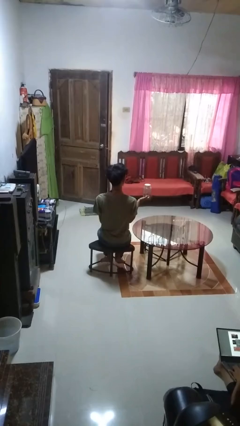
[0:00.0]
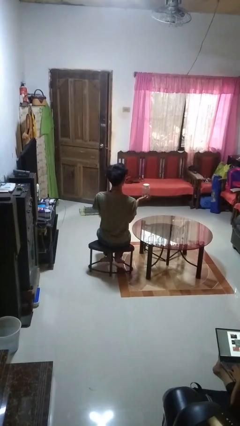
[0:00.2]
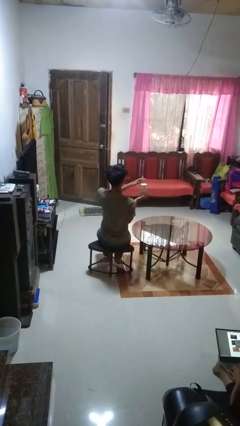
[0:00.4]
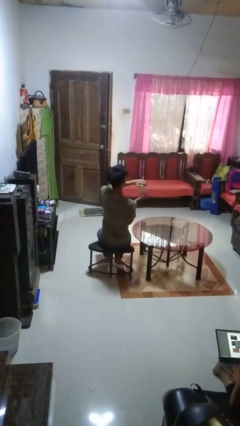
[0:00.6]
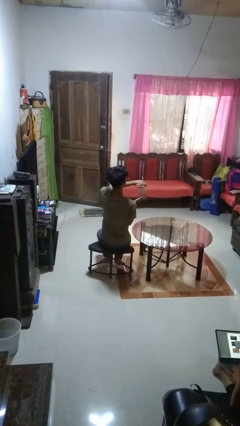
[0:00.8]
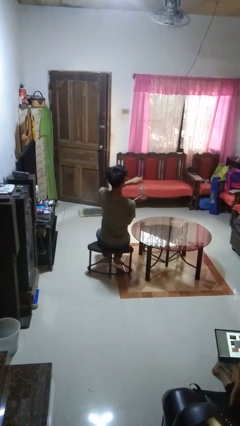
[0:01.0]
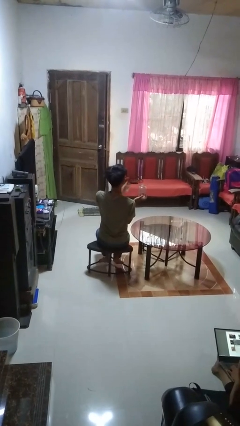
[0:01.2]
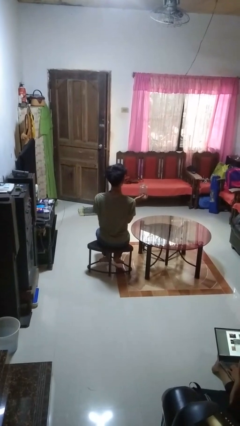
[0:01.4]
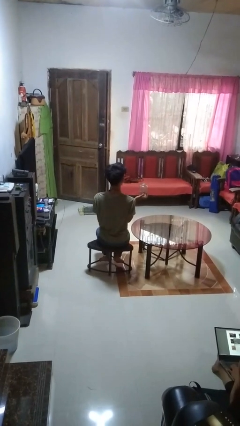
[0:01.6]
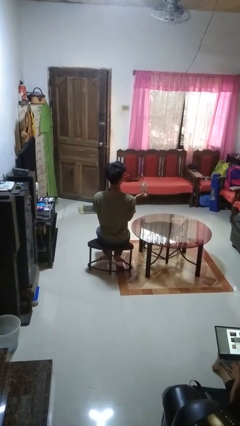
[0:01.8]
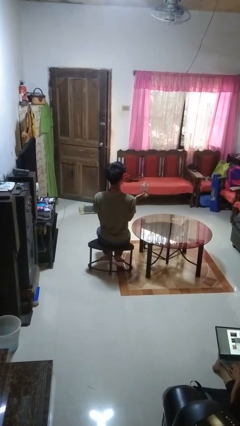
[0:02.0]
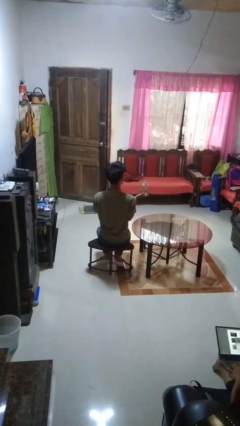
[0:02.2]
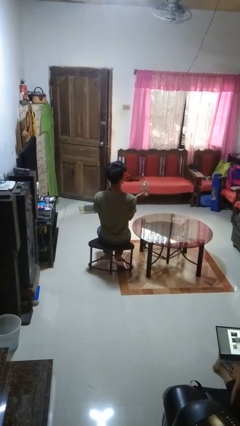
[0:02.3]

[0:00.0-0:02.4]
person opens jar

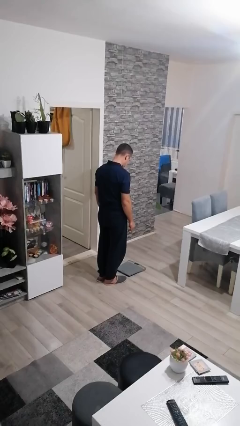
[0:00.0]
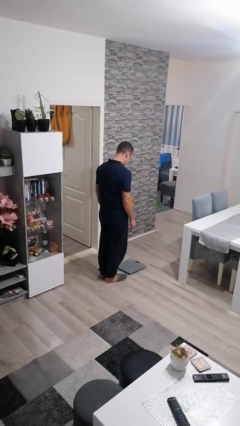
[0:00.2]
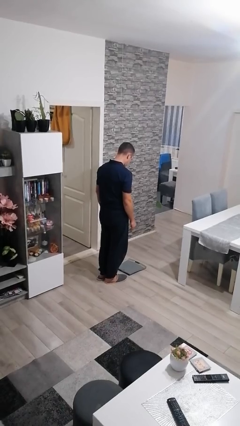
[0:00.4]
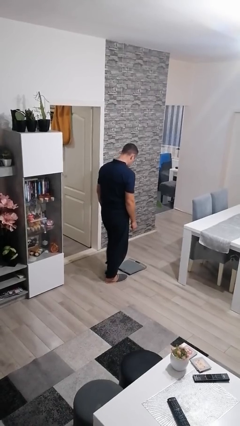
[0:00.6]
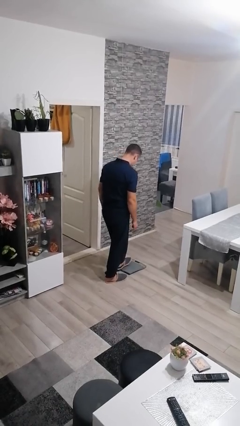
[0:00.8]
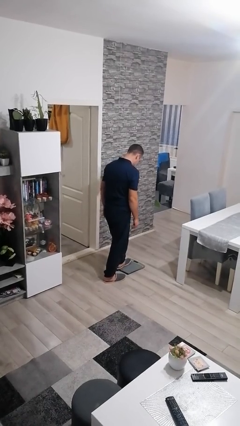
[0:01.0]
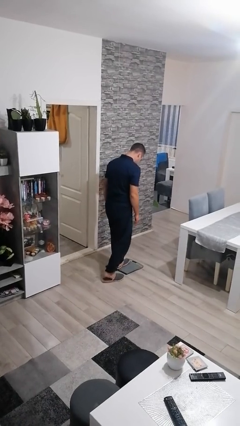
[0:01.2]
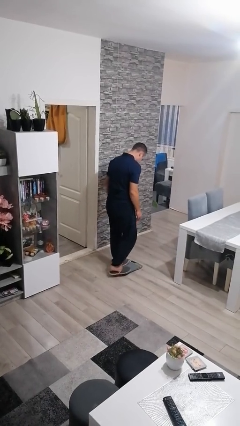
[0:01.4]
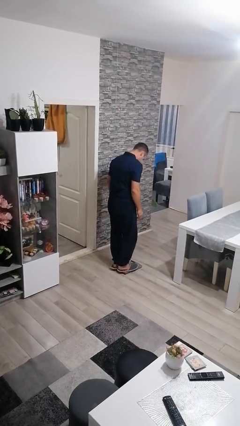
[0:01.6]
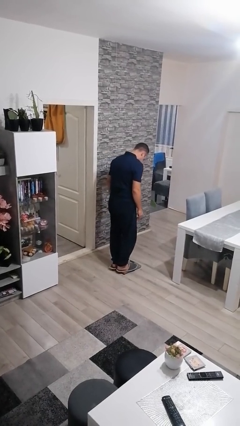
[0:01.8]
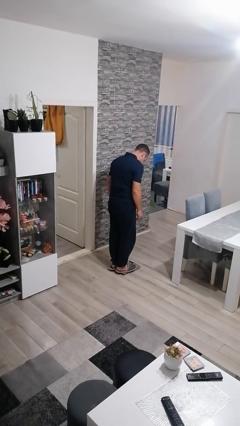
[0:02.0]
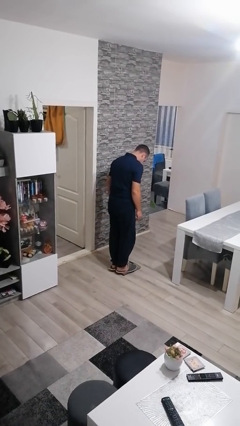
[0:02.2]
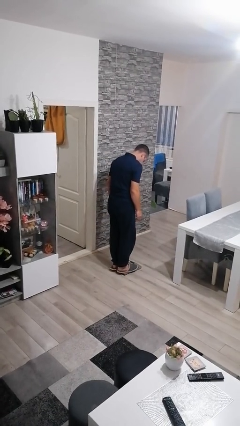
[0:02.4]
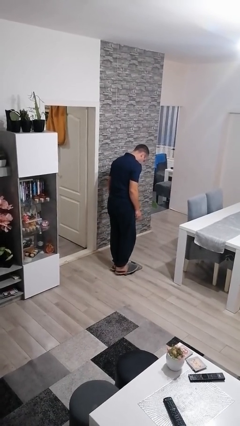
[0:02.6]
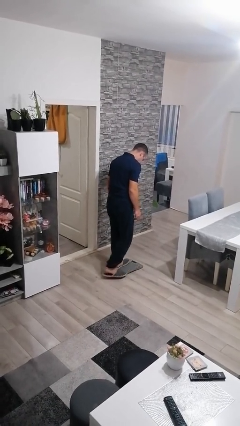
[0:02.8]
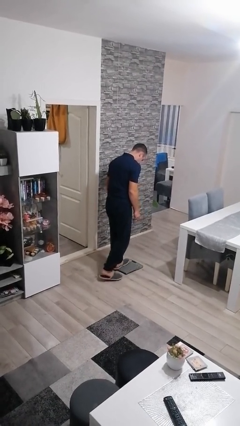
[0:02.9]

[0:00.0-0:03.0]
person uses bodyweight scale

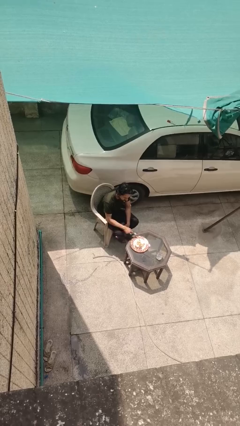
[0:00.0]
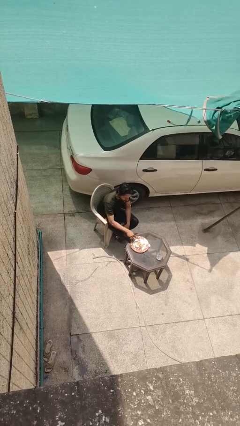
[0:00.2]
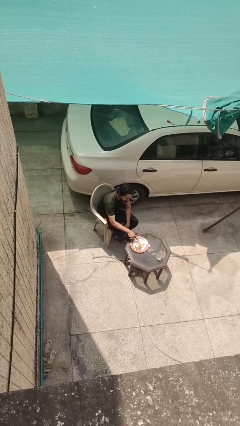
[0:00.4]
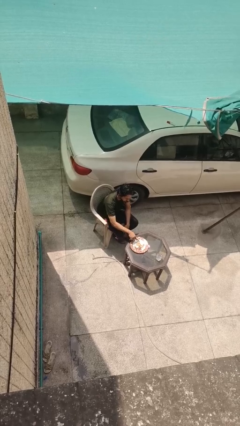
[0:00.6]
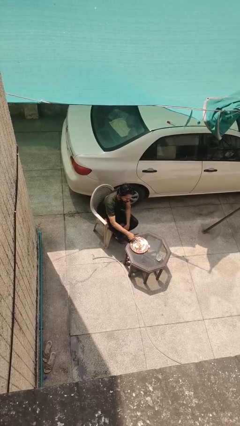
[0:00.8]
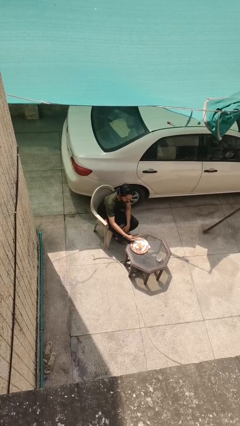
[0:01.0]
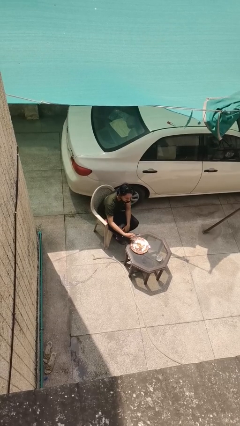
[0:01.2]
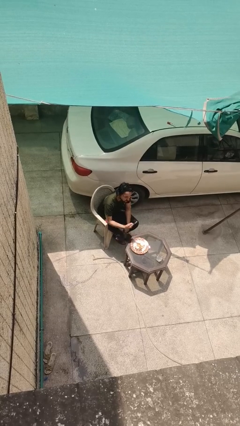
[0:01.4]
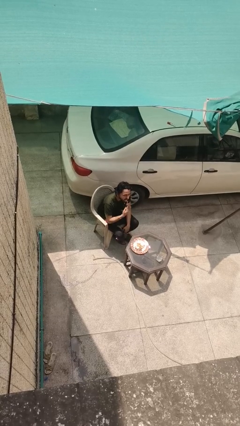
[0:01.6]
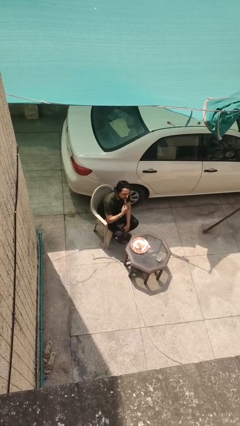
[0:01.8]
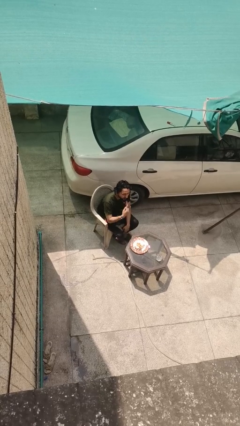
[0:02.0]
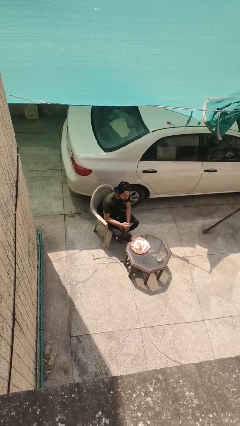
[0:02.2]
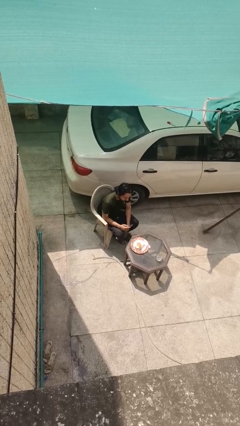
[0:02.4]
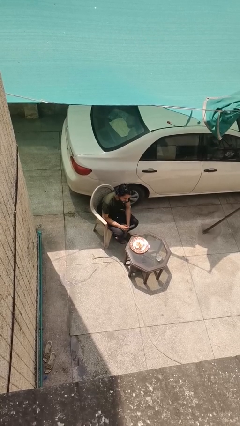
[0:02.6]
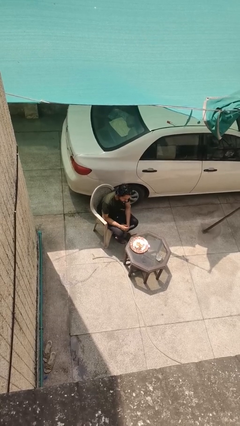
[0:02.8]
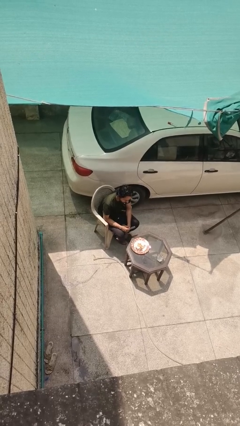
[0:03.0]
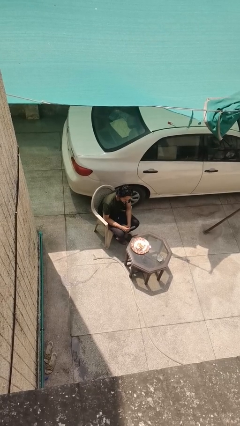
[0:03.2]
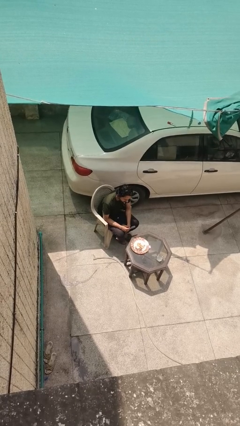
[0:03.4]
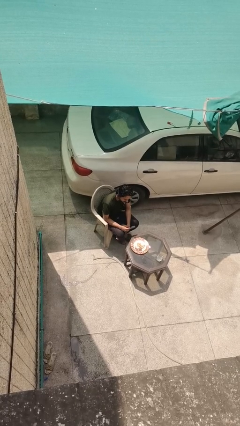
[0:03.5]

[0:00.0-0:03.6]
person eats with utensil

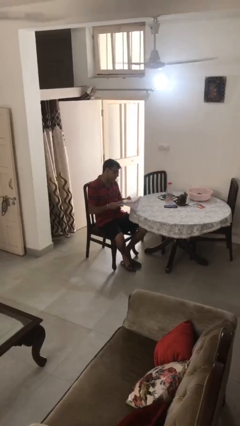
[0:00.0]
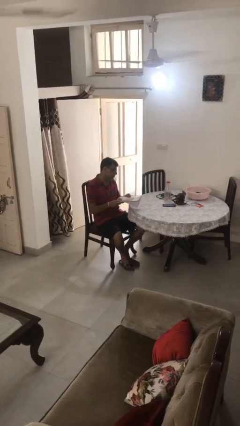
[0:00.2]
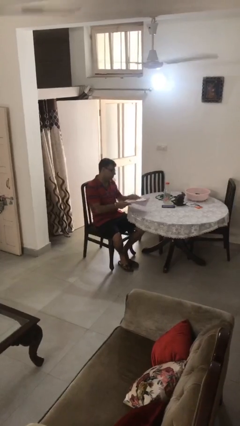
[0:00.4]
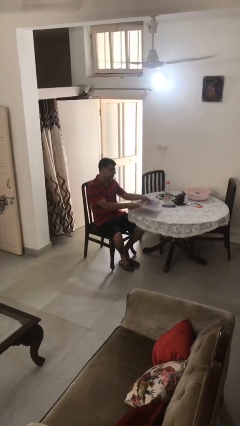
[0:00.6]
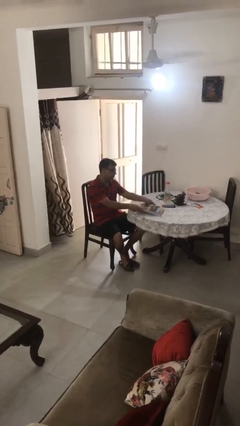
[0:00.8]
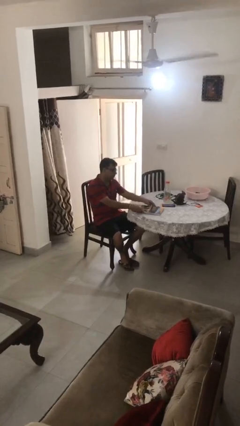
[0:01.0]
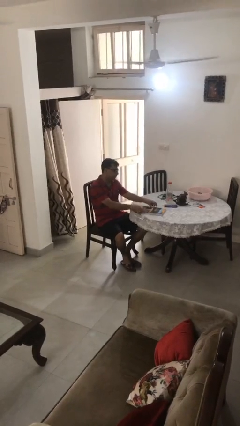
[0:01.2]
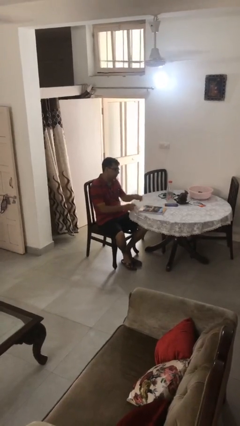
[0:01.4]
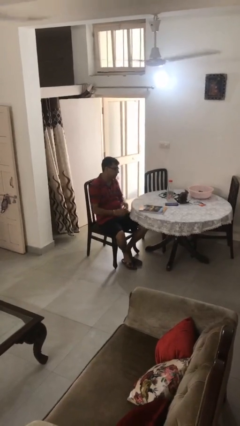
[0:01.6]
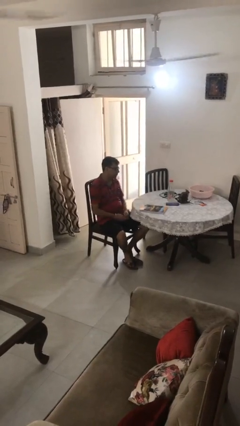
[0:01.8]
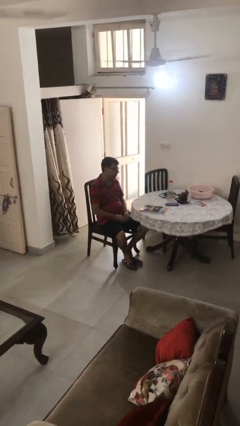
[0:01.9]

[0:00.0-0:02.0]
person puts down object on table

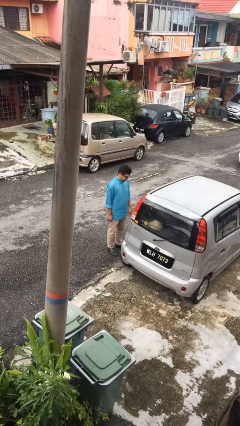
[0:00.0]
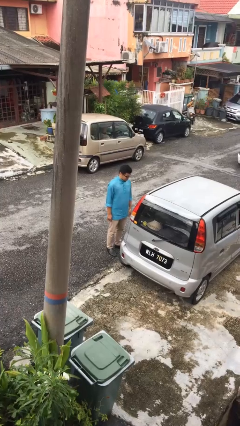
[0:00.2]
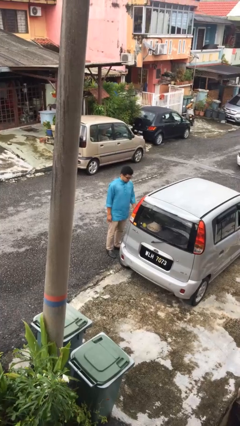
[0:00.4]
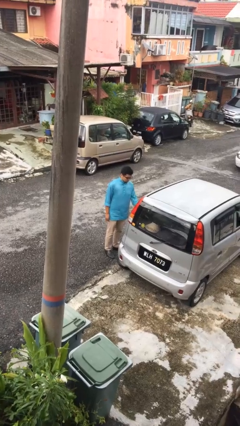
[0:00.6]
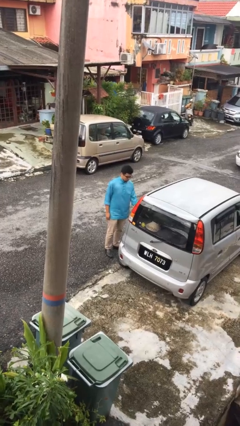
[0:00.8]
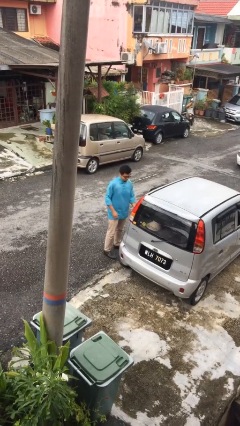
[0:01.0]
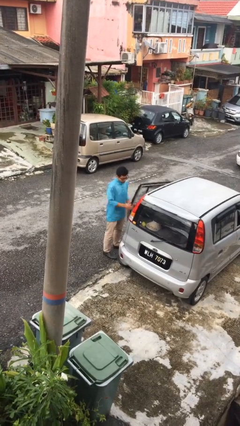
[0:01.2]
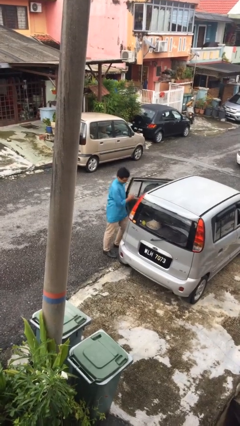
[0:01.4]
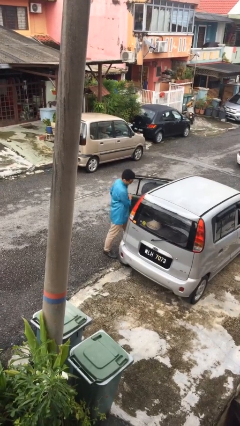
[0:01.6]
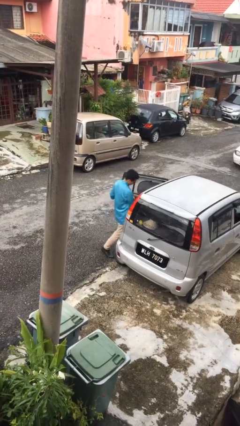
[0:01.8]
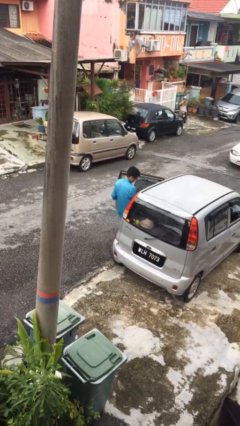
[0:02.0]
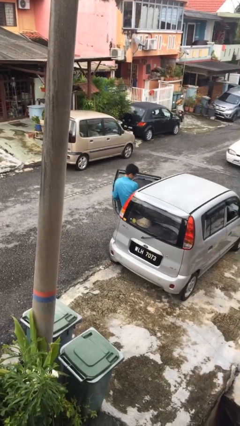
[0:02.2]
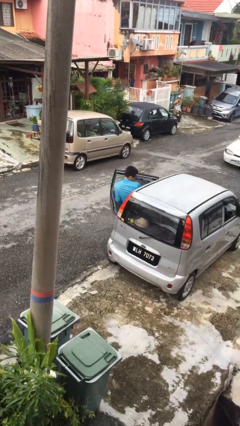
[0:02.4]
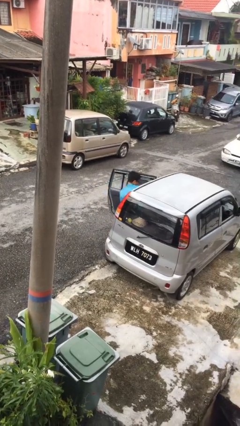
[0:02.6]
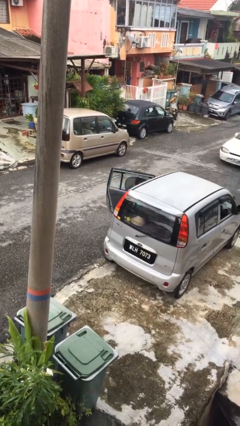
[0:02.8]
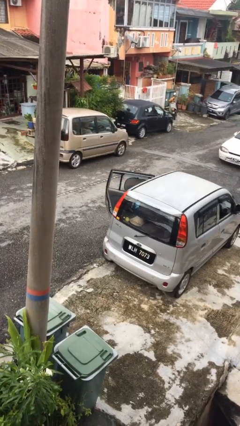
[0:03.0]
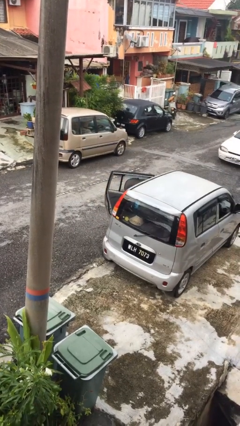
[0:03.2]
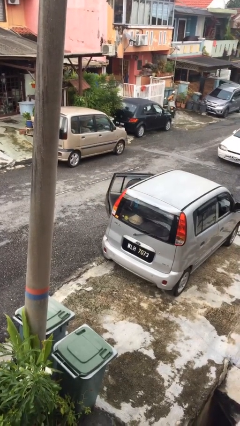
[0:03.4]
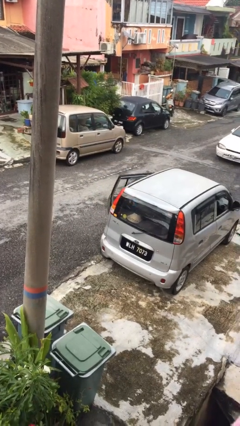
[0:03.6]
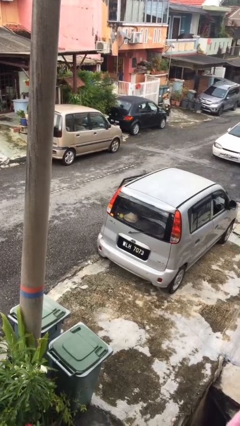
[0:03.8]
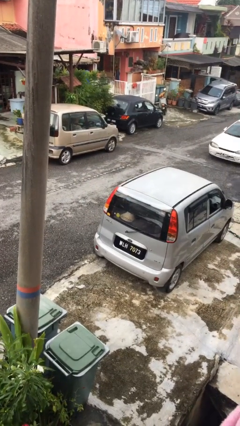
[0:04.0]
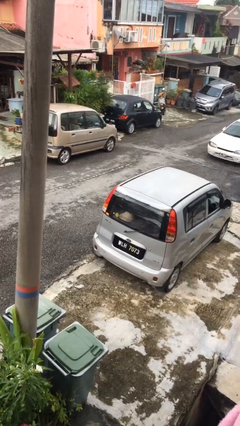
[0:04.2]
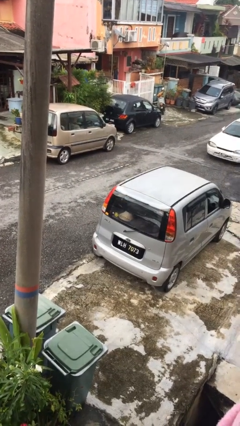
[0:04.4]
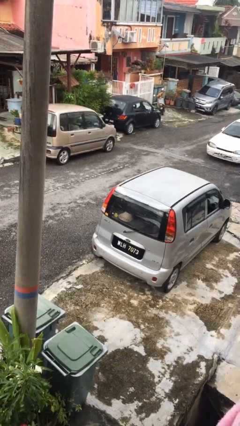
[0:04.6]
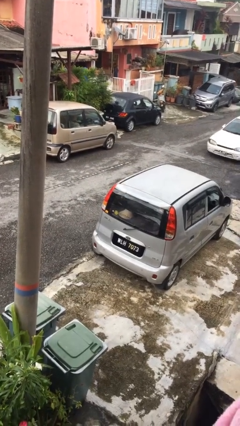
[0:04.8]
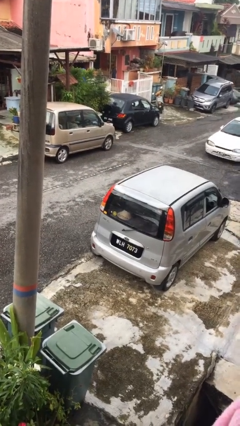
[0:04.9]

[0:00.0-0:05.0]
person enters car

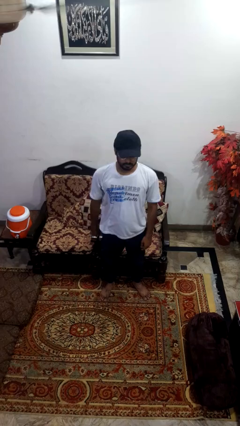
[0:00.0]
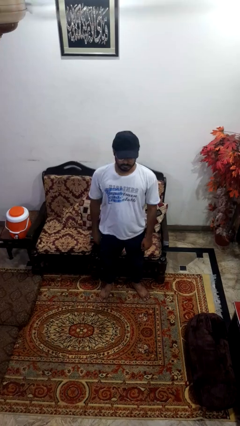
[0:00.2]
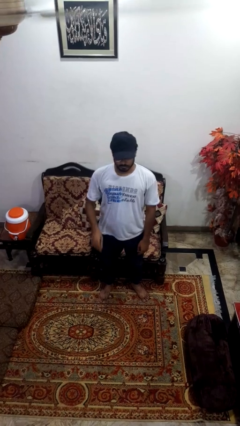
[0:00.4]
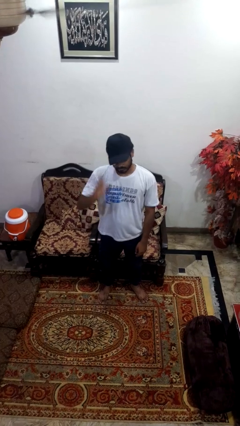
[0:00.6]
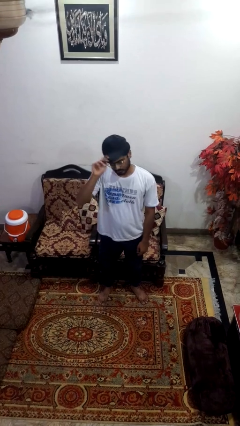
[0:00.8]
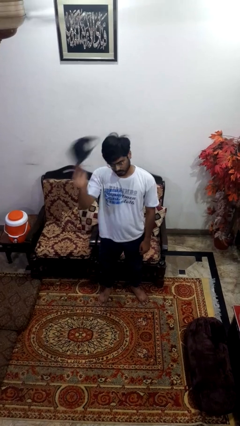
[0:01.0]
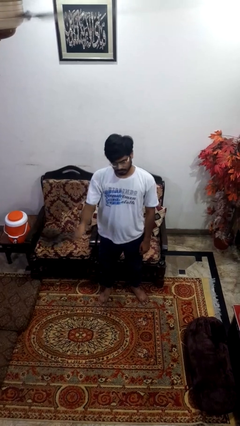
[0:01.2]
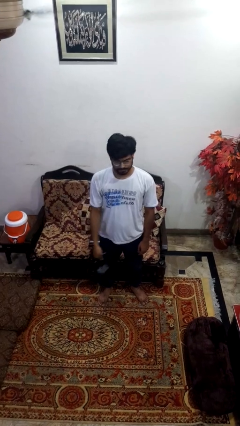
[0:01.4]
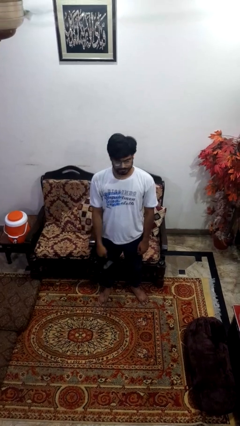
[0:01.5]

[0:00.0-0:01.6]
person takes off hat
